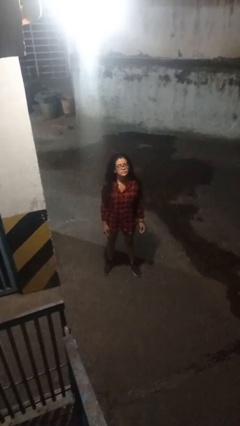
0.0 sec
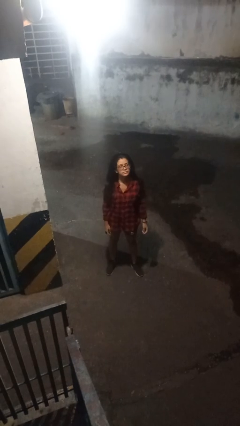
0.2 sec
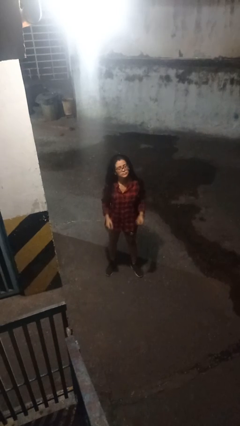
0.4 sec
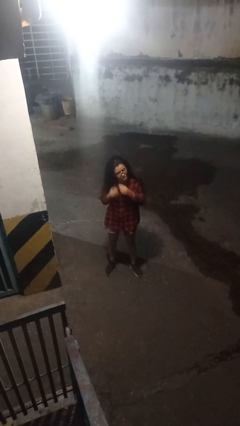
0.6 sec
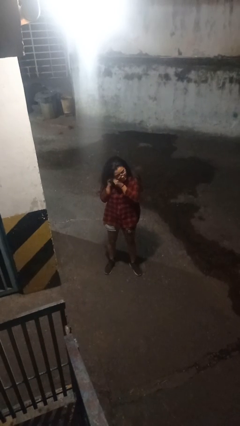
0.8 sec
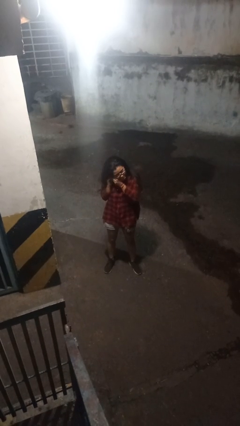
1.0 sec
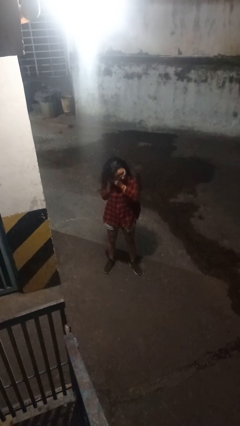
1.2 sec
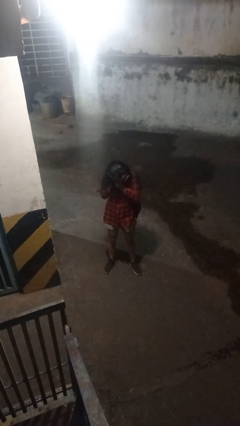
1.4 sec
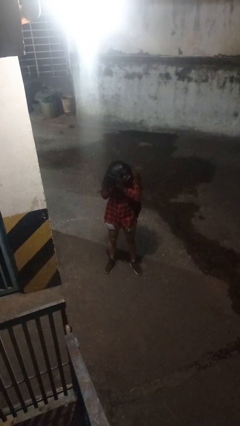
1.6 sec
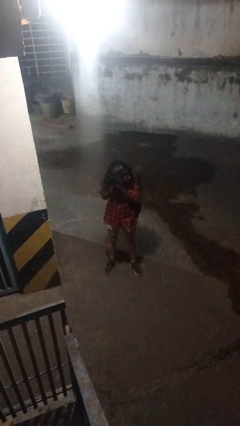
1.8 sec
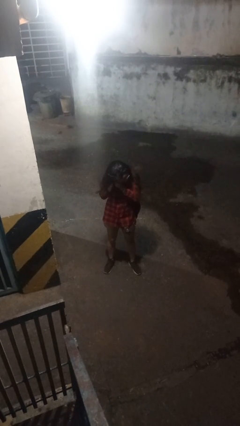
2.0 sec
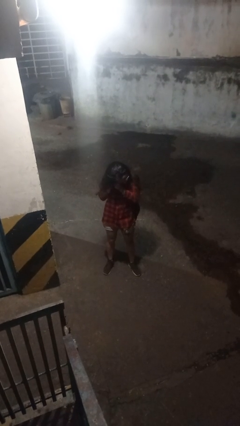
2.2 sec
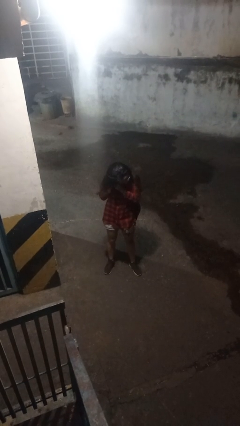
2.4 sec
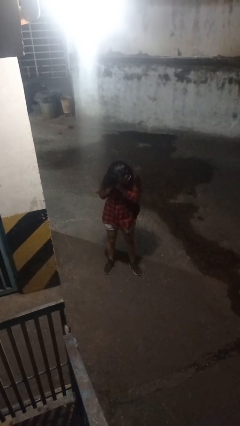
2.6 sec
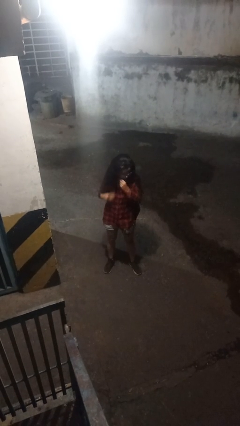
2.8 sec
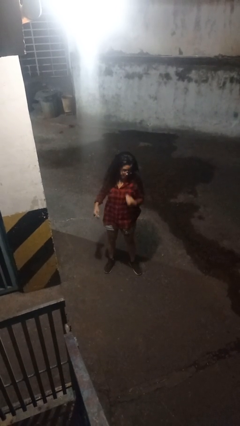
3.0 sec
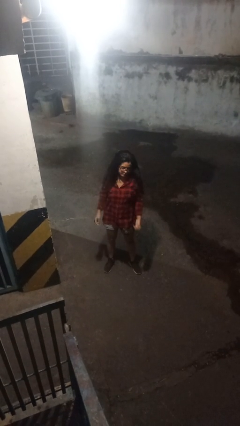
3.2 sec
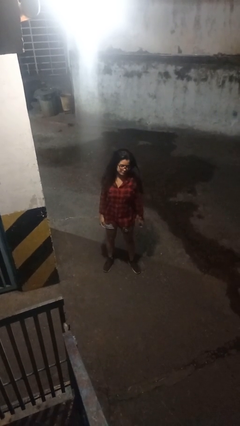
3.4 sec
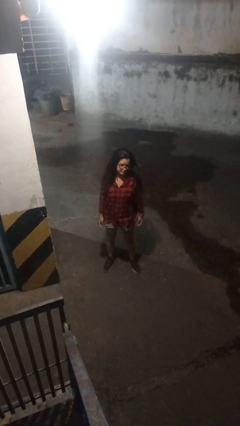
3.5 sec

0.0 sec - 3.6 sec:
person takes off earrings

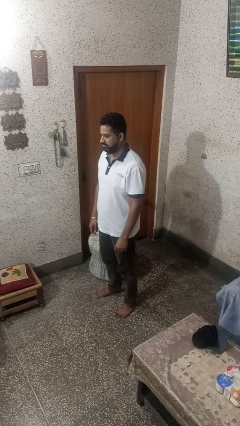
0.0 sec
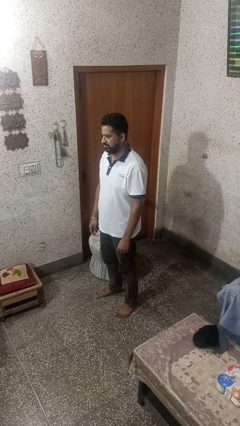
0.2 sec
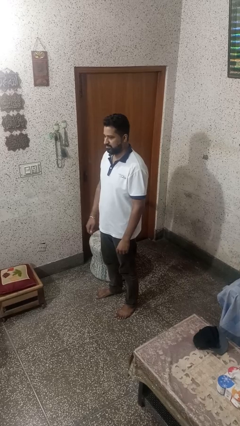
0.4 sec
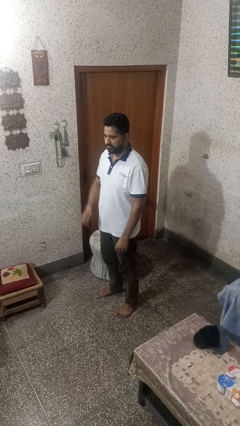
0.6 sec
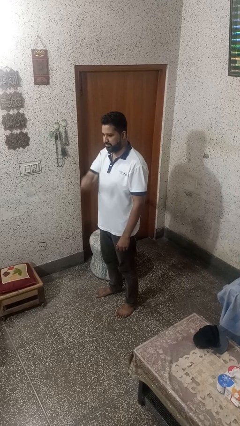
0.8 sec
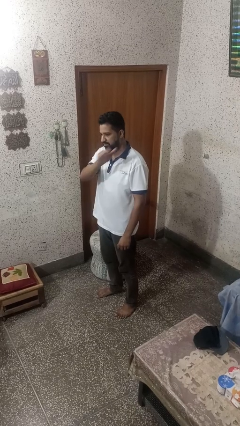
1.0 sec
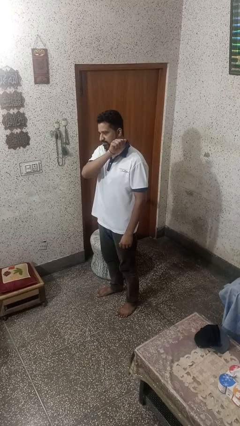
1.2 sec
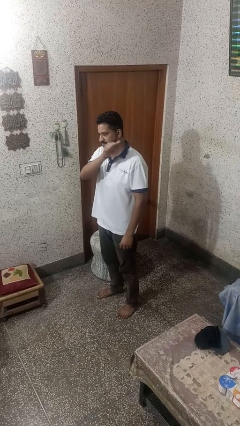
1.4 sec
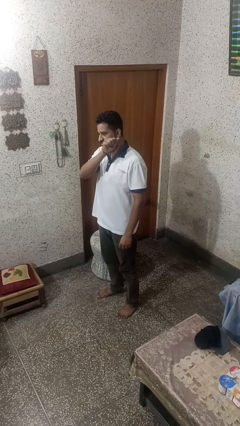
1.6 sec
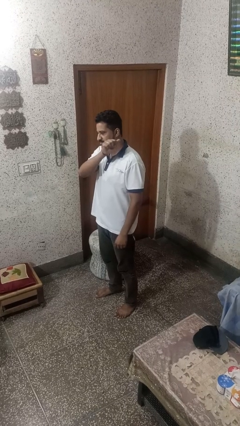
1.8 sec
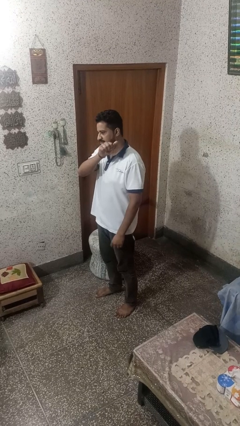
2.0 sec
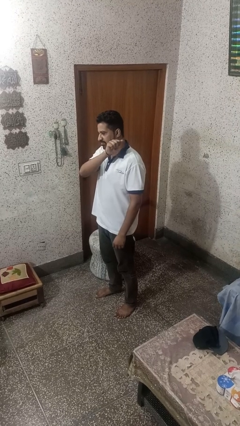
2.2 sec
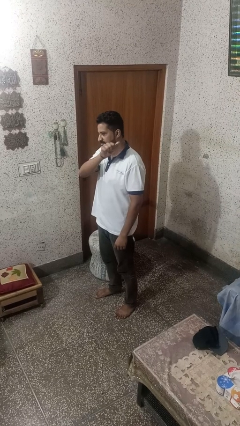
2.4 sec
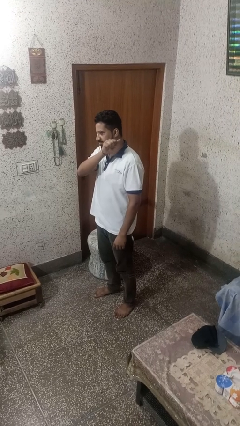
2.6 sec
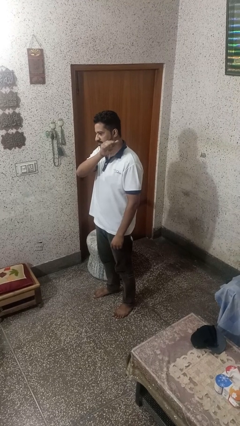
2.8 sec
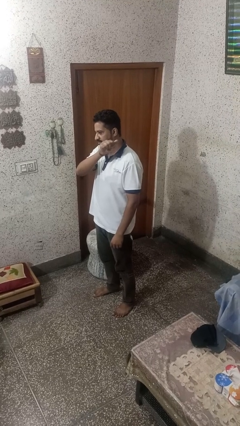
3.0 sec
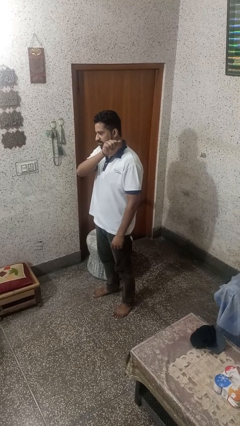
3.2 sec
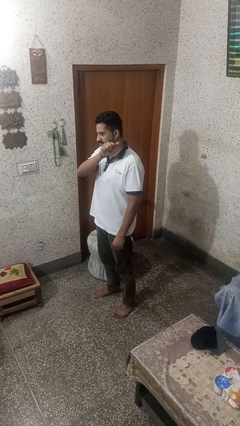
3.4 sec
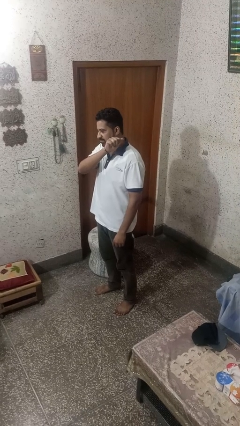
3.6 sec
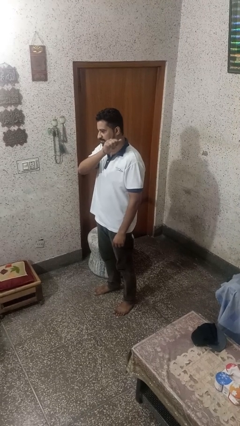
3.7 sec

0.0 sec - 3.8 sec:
person gestures behind me

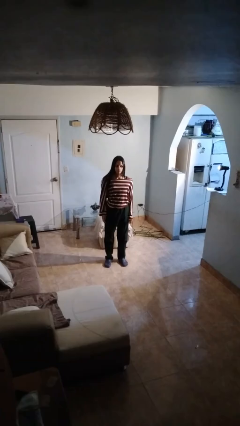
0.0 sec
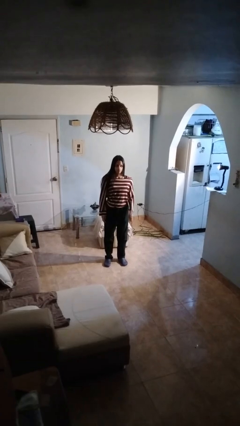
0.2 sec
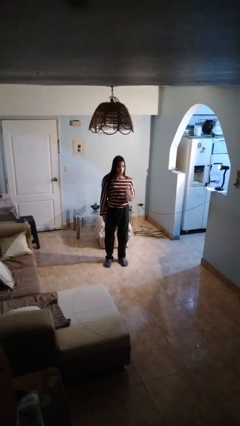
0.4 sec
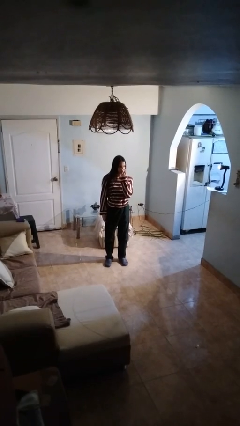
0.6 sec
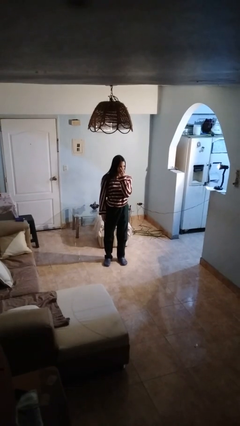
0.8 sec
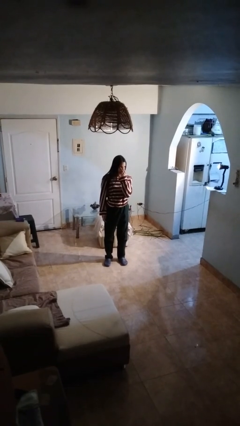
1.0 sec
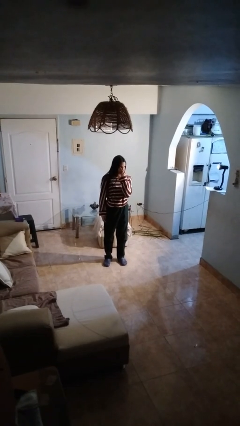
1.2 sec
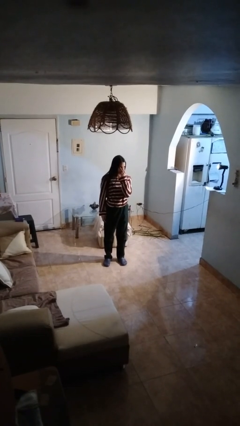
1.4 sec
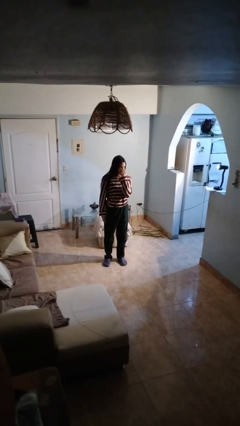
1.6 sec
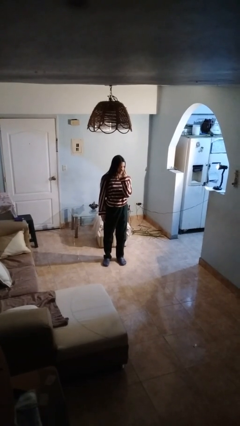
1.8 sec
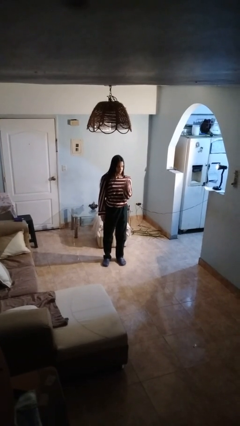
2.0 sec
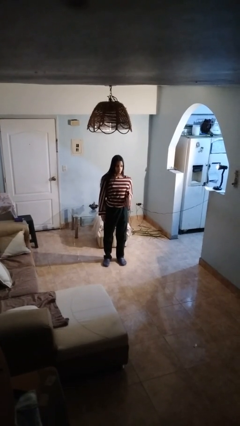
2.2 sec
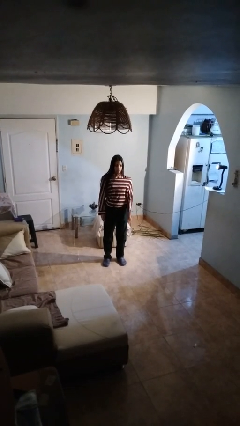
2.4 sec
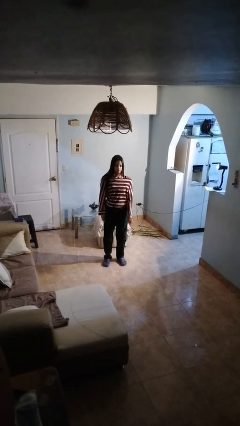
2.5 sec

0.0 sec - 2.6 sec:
person gestures watch closely

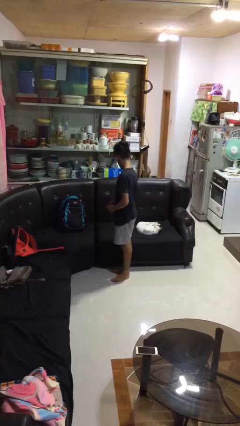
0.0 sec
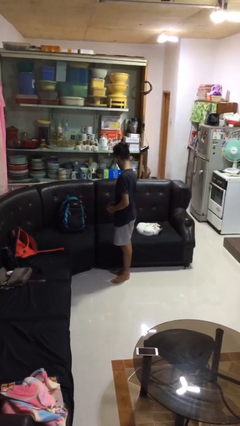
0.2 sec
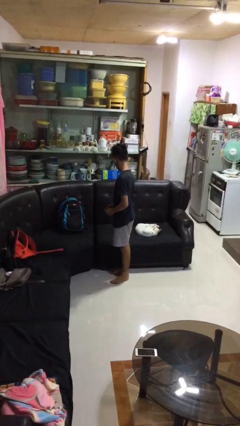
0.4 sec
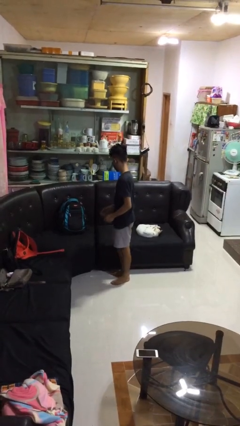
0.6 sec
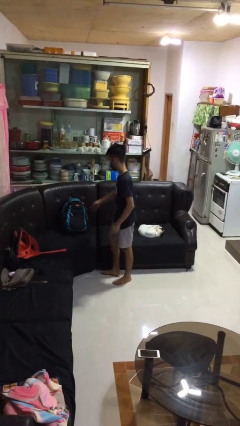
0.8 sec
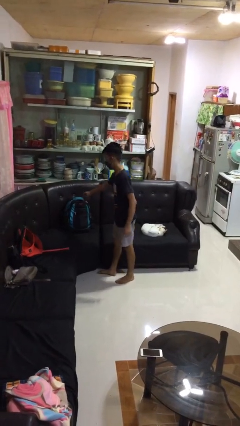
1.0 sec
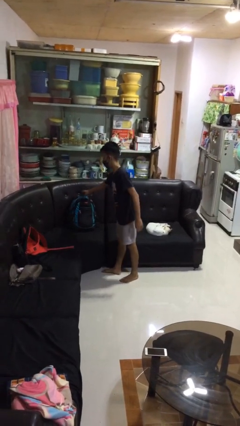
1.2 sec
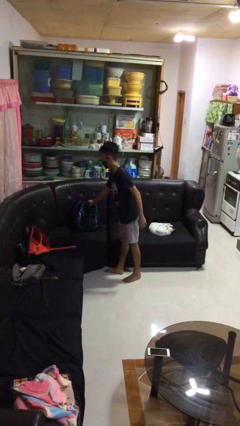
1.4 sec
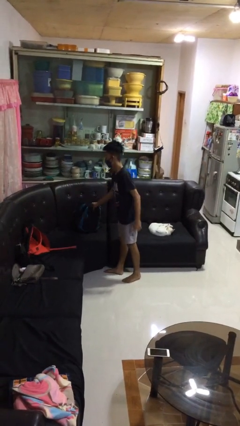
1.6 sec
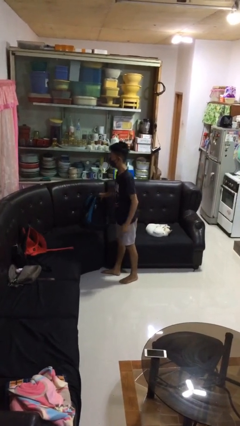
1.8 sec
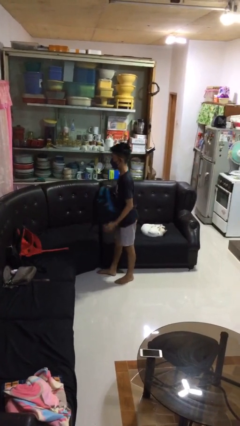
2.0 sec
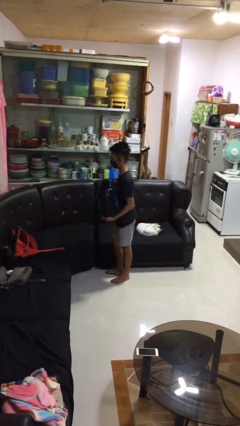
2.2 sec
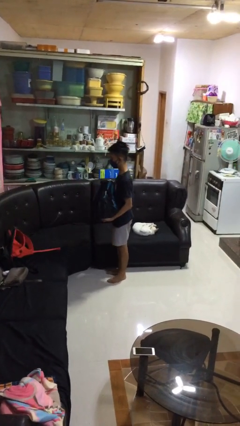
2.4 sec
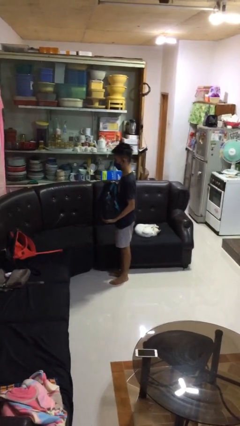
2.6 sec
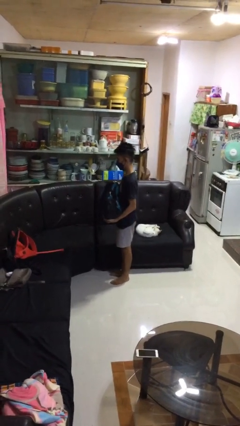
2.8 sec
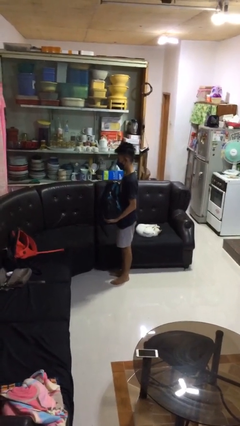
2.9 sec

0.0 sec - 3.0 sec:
person picks up object from couch

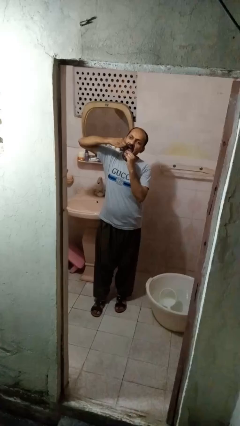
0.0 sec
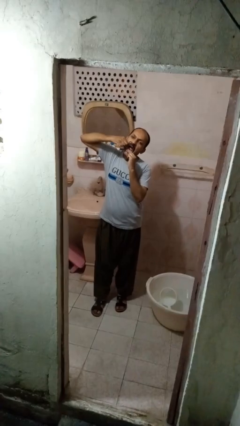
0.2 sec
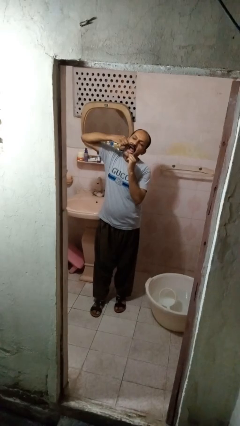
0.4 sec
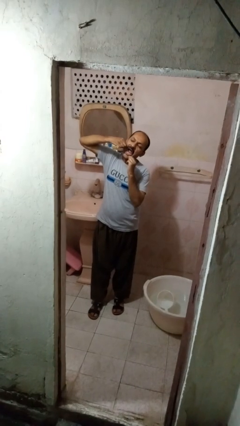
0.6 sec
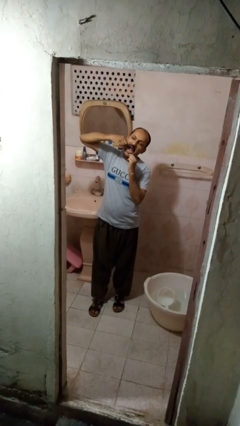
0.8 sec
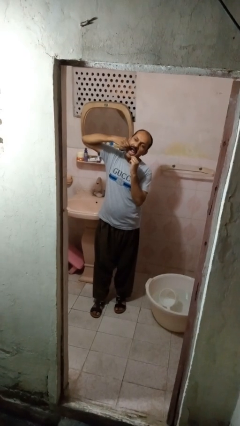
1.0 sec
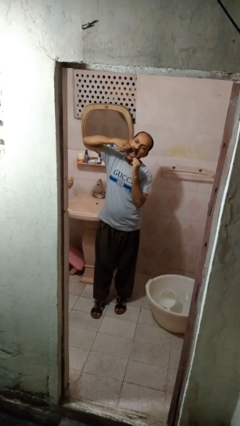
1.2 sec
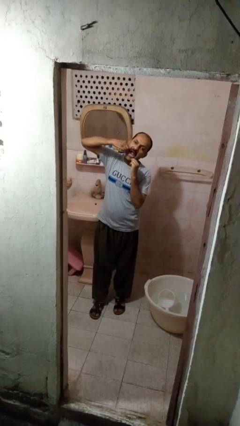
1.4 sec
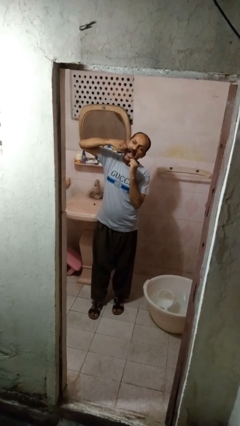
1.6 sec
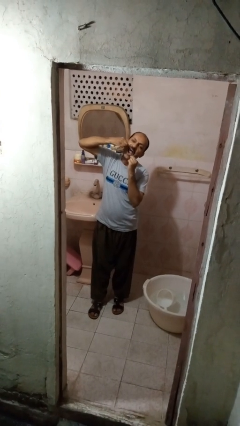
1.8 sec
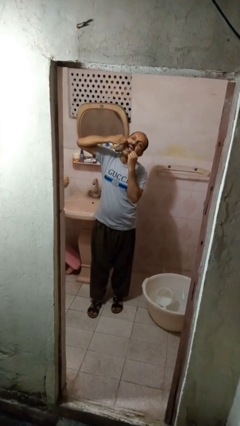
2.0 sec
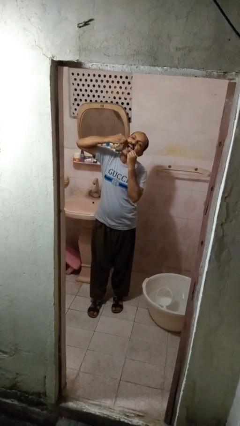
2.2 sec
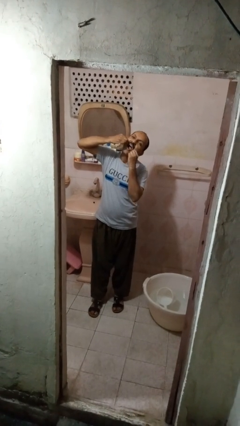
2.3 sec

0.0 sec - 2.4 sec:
person flosses

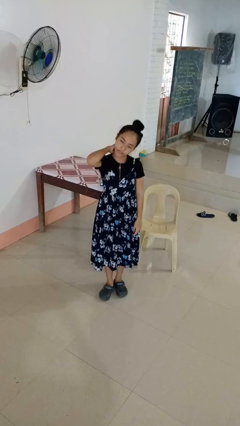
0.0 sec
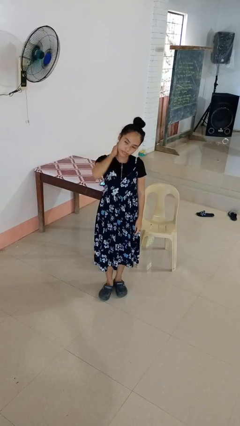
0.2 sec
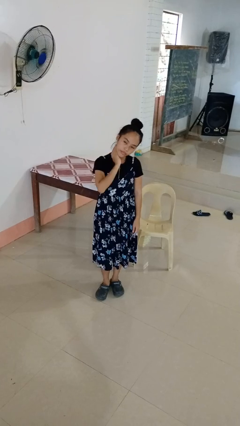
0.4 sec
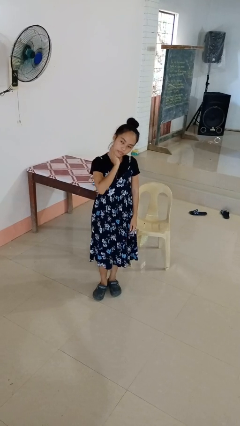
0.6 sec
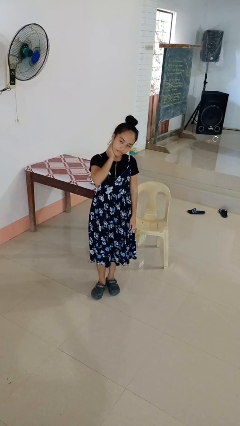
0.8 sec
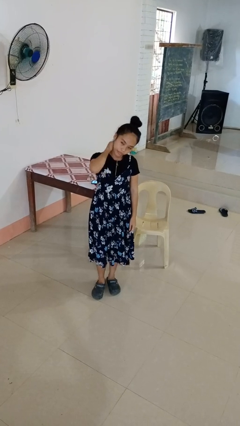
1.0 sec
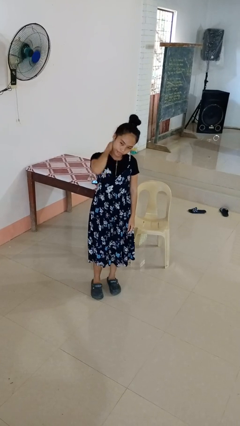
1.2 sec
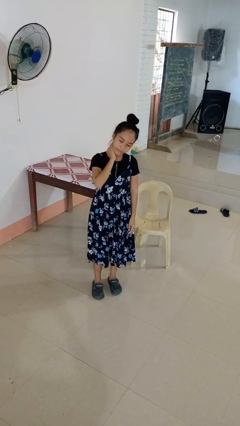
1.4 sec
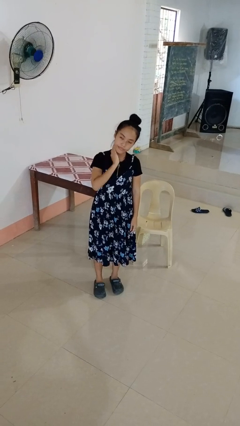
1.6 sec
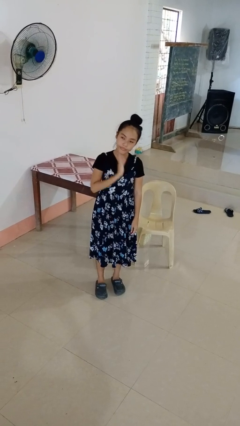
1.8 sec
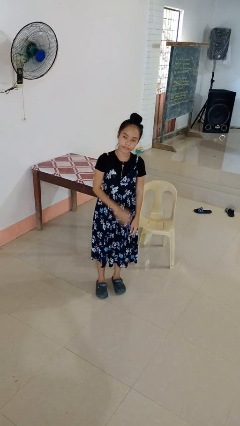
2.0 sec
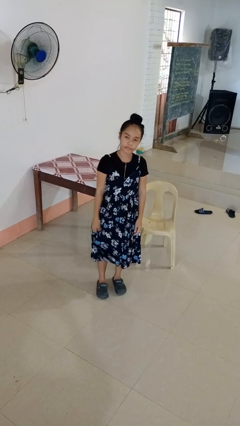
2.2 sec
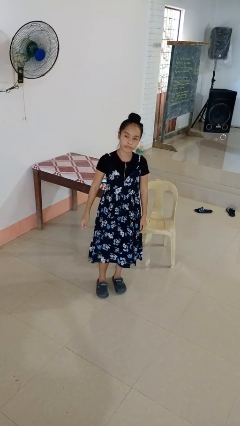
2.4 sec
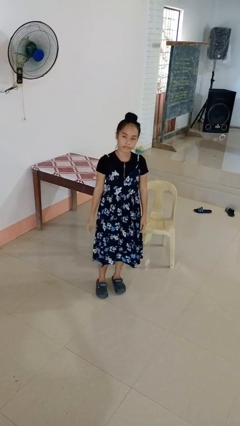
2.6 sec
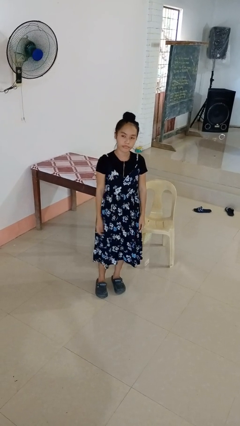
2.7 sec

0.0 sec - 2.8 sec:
person rubs neck
